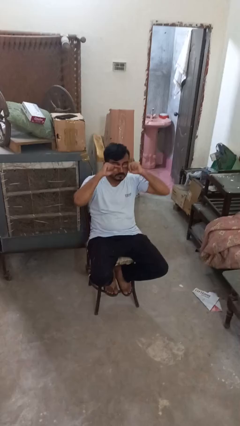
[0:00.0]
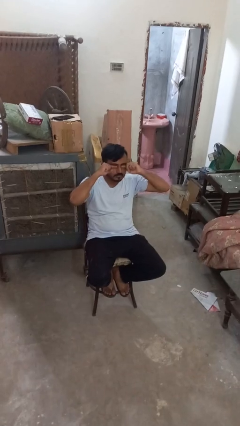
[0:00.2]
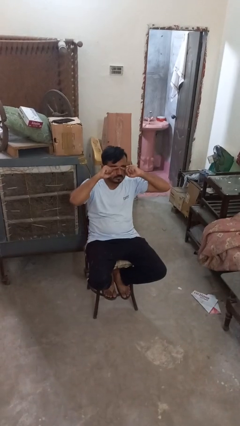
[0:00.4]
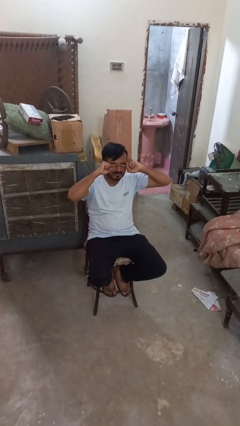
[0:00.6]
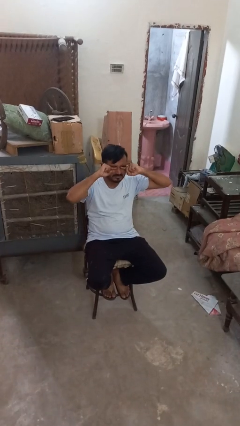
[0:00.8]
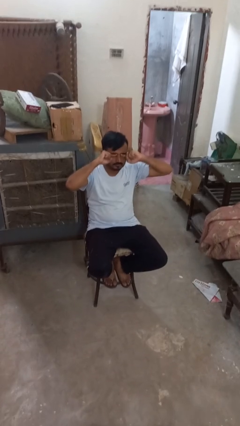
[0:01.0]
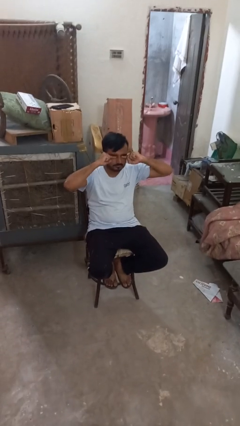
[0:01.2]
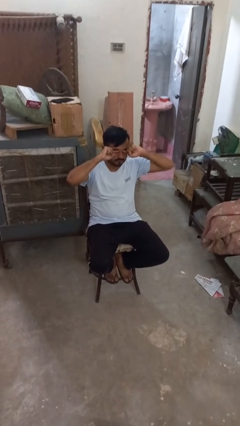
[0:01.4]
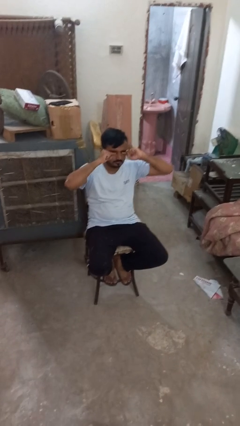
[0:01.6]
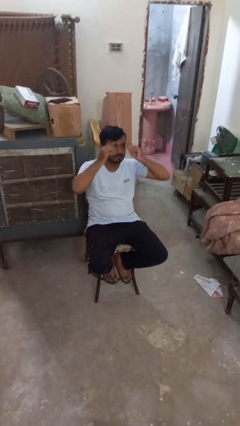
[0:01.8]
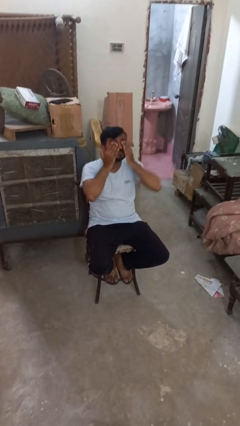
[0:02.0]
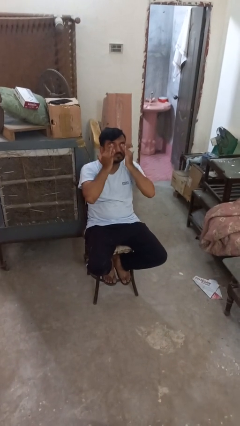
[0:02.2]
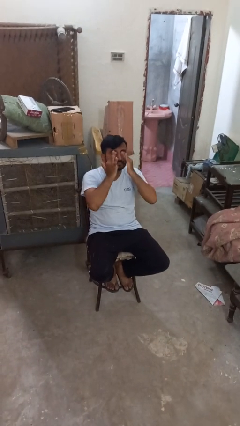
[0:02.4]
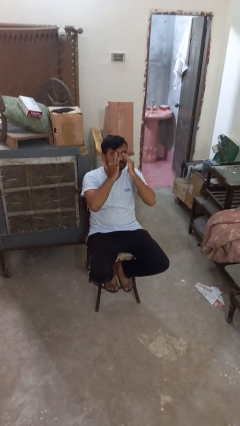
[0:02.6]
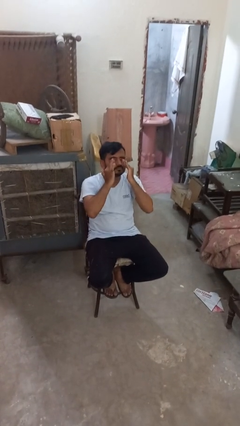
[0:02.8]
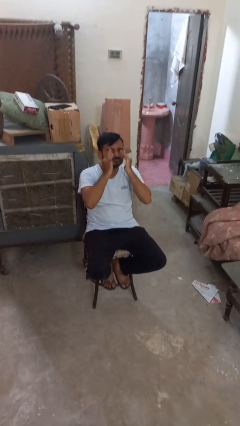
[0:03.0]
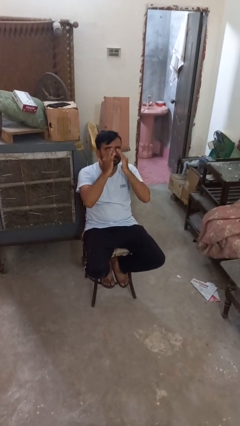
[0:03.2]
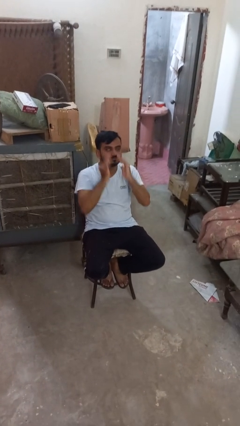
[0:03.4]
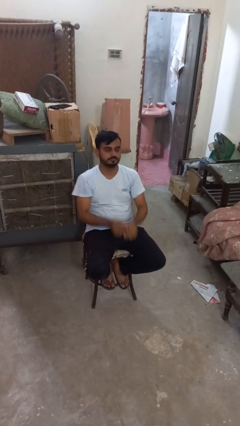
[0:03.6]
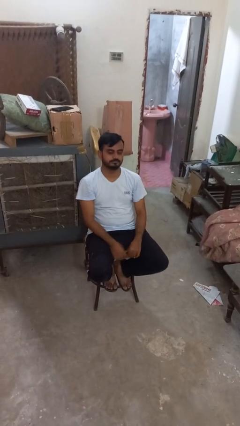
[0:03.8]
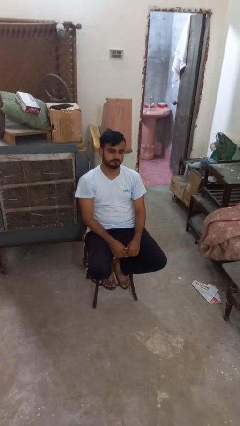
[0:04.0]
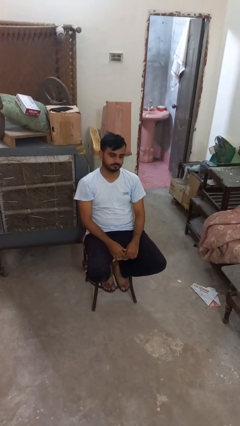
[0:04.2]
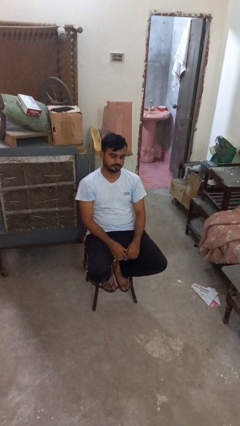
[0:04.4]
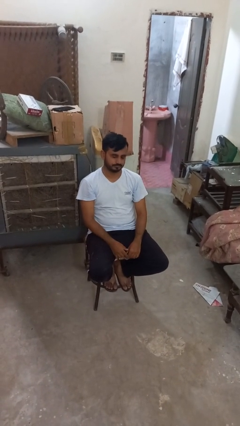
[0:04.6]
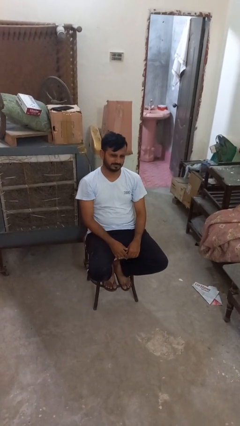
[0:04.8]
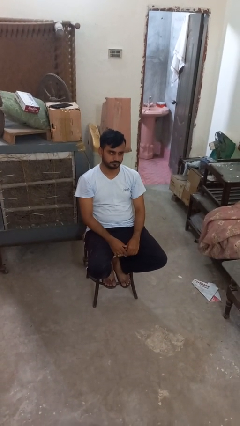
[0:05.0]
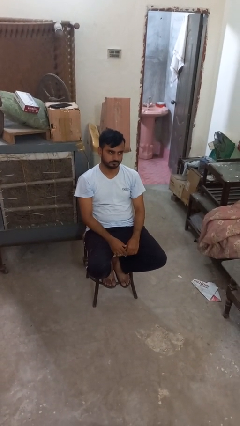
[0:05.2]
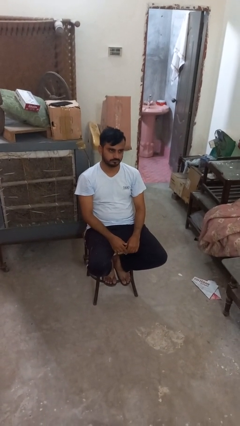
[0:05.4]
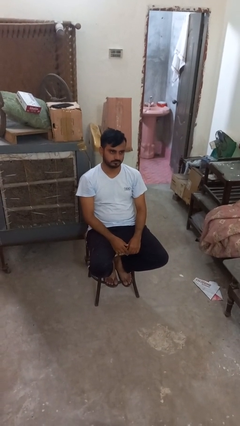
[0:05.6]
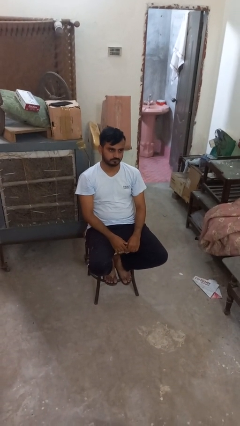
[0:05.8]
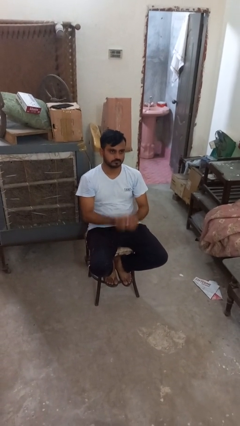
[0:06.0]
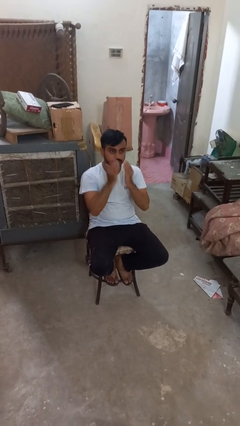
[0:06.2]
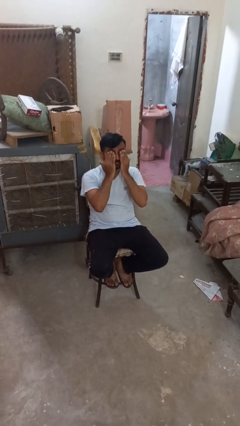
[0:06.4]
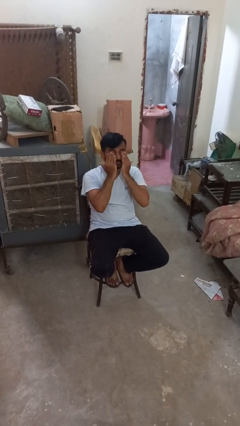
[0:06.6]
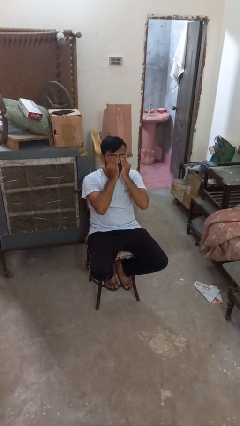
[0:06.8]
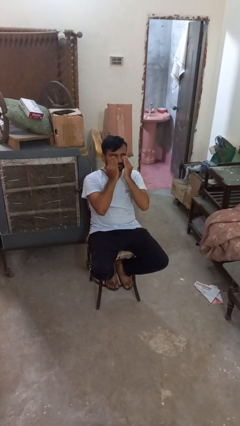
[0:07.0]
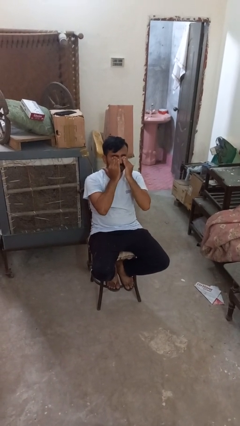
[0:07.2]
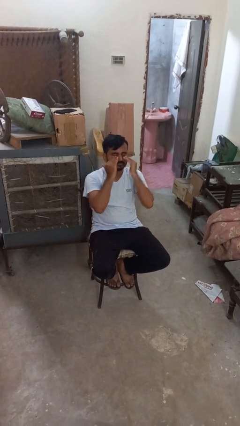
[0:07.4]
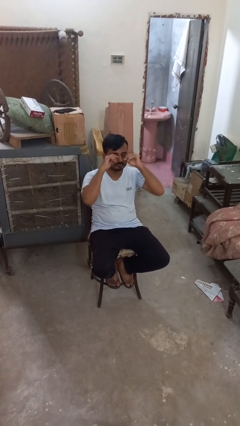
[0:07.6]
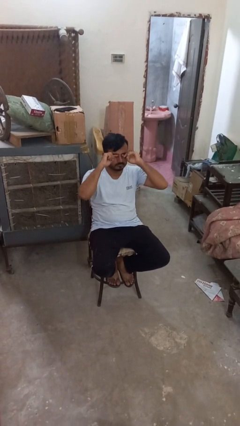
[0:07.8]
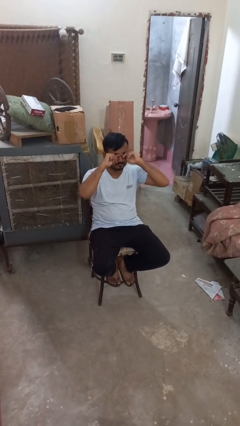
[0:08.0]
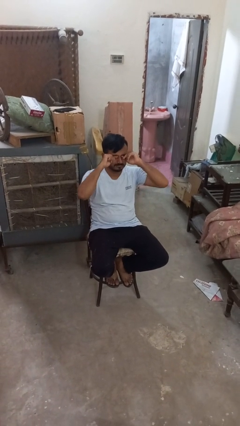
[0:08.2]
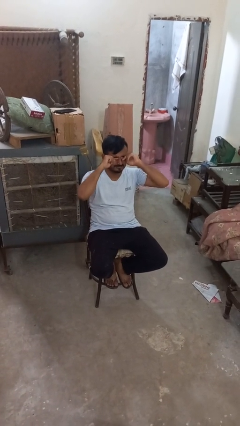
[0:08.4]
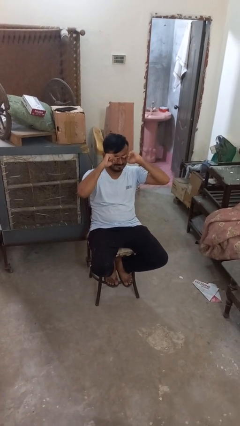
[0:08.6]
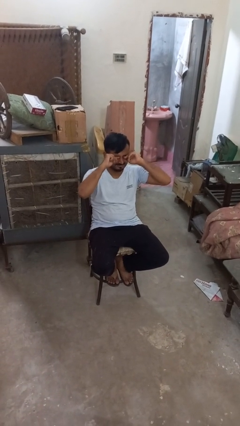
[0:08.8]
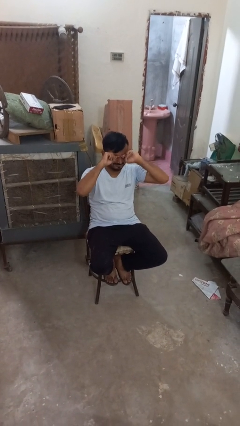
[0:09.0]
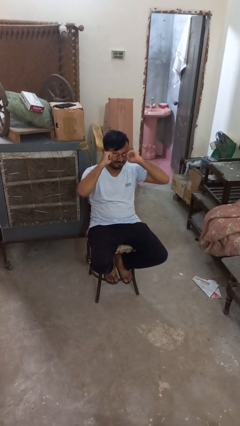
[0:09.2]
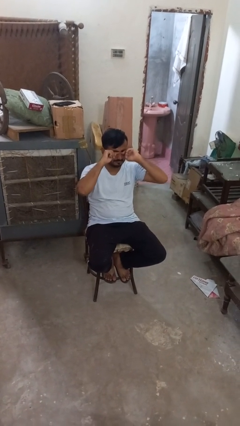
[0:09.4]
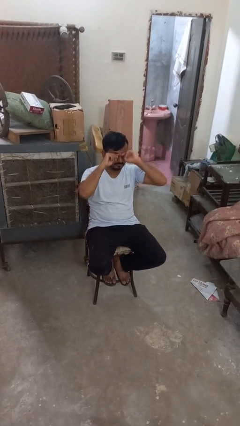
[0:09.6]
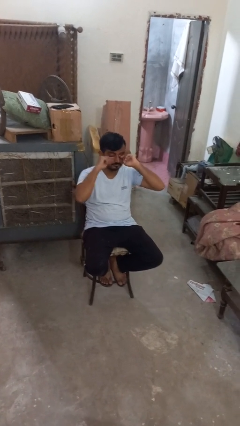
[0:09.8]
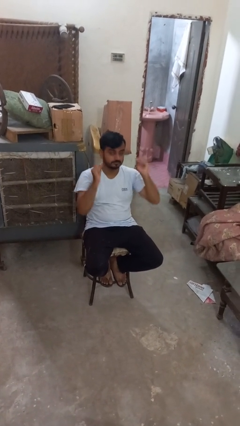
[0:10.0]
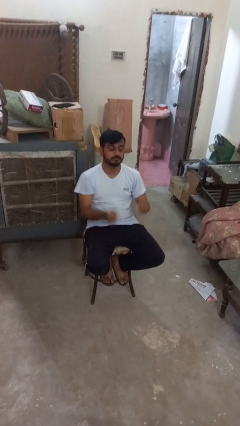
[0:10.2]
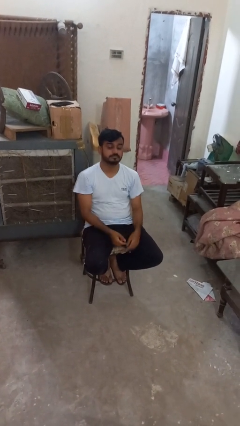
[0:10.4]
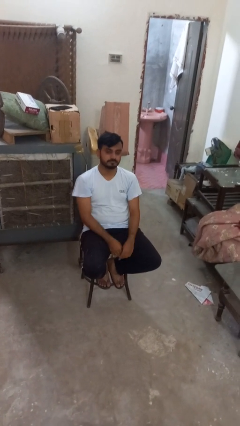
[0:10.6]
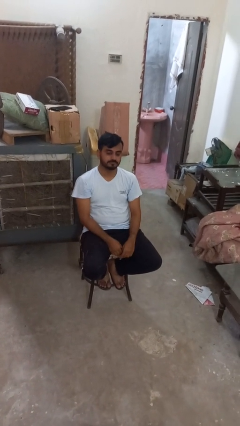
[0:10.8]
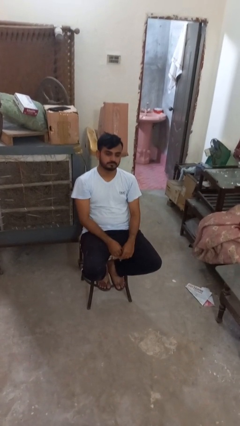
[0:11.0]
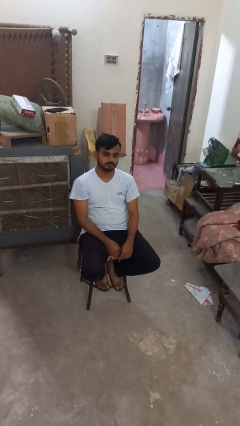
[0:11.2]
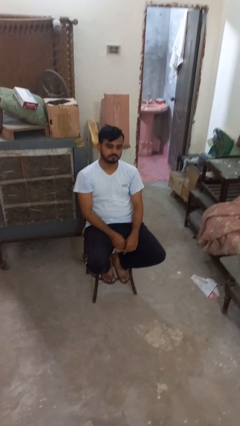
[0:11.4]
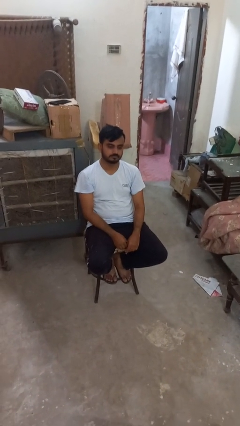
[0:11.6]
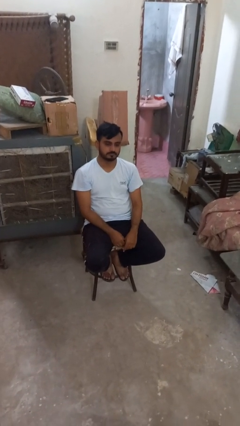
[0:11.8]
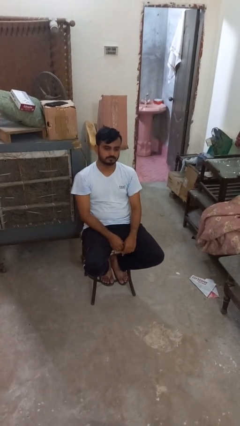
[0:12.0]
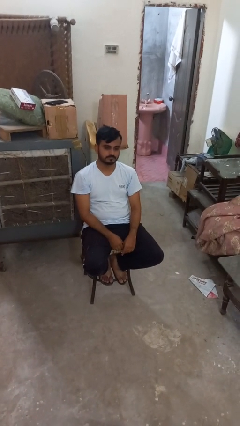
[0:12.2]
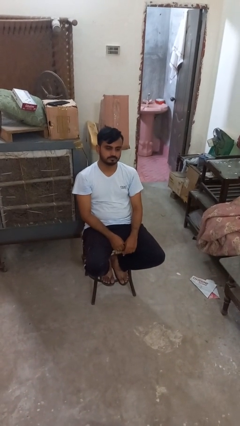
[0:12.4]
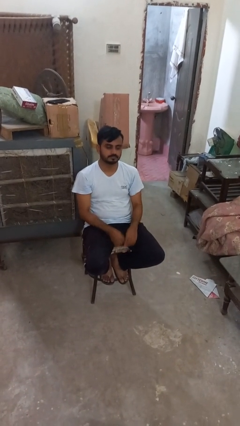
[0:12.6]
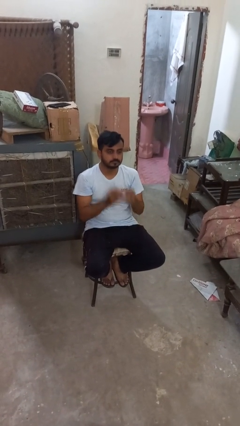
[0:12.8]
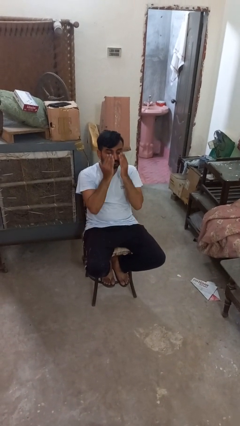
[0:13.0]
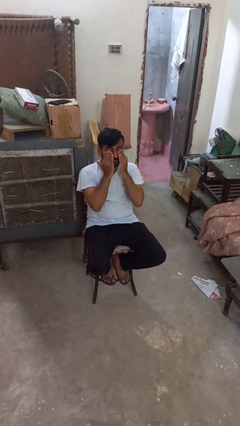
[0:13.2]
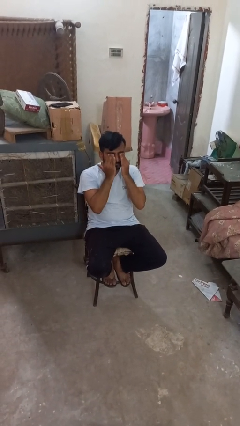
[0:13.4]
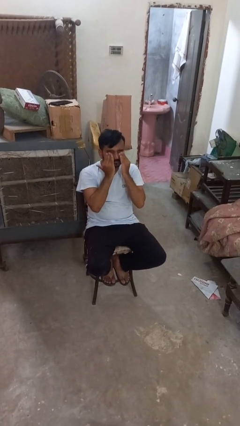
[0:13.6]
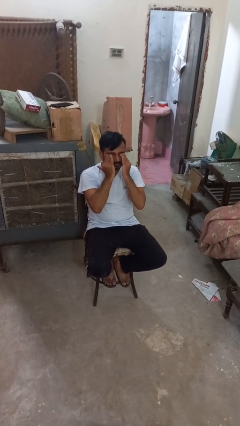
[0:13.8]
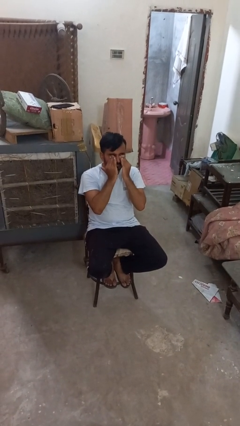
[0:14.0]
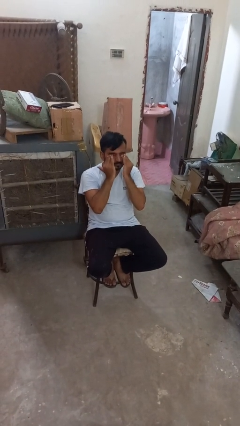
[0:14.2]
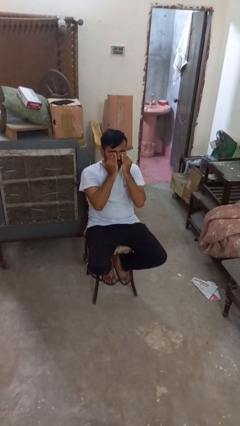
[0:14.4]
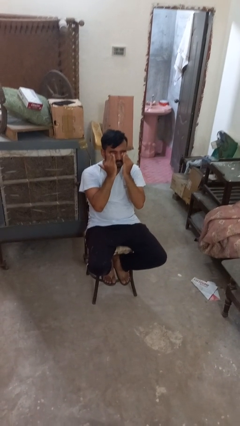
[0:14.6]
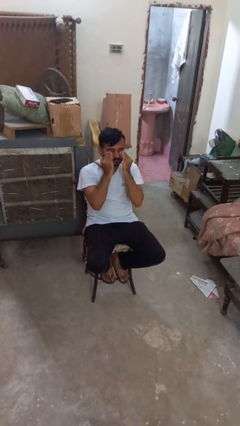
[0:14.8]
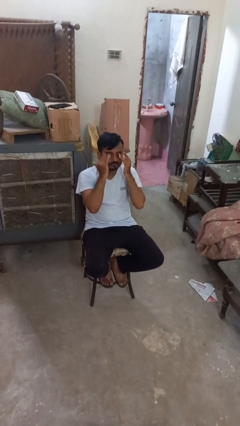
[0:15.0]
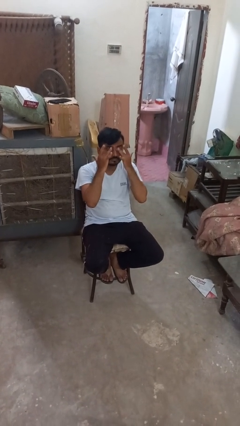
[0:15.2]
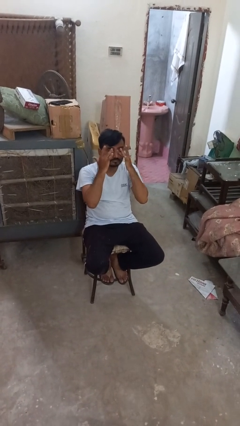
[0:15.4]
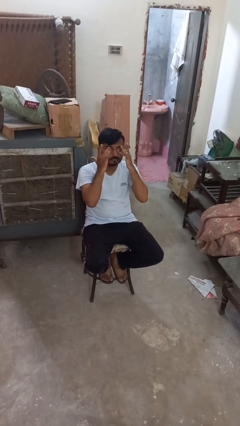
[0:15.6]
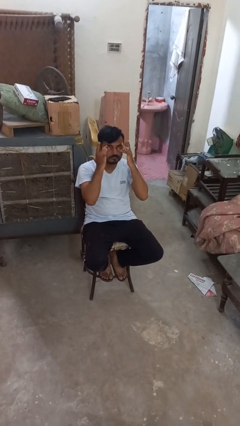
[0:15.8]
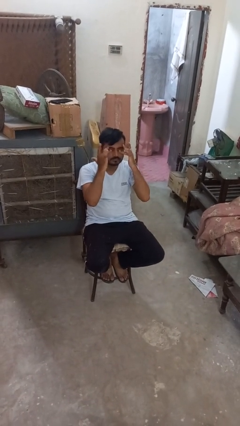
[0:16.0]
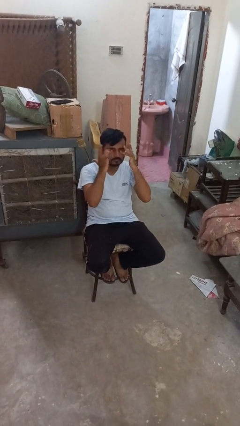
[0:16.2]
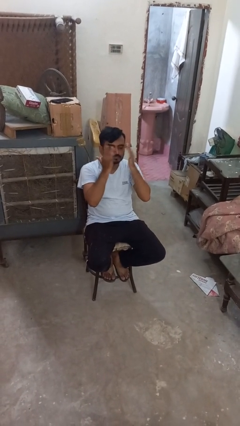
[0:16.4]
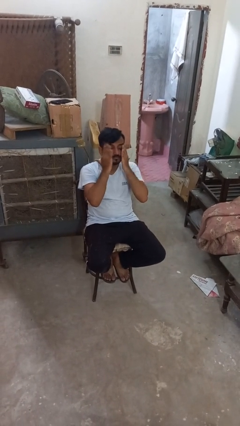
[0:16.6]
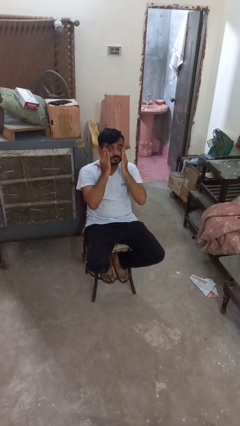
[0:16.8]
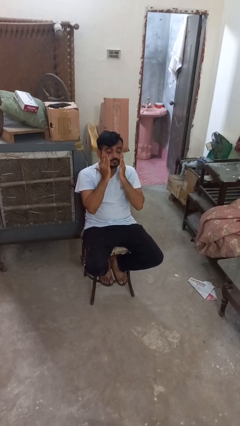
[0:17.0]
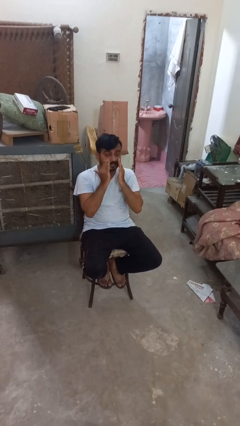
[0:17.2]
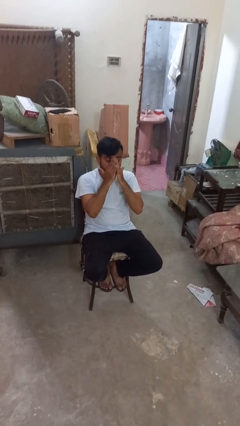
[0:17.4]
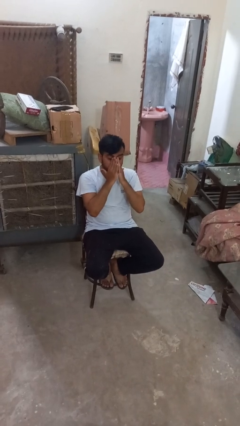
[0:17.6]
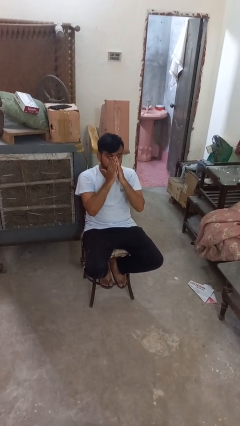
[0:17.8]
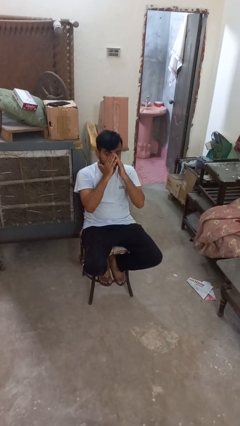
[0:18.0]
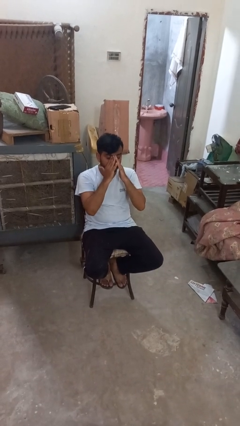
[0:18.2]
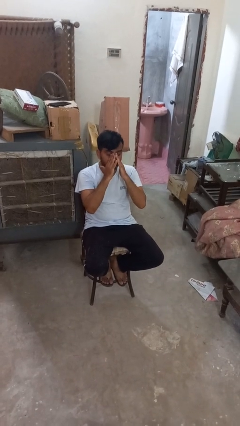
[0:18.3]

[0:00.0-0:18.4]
person rubs eyes
